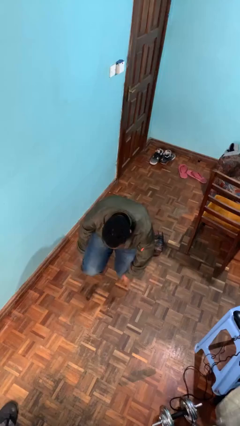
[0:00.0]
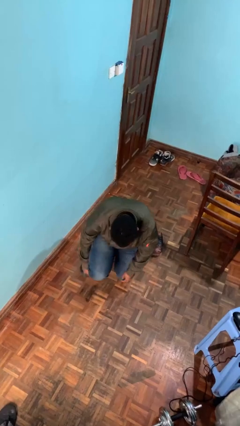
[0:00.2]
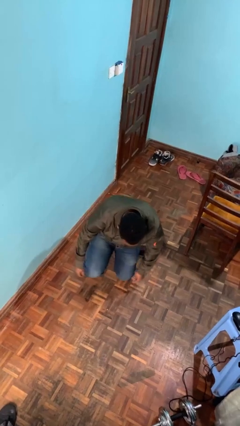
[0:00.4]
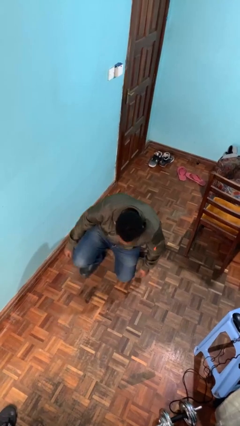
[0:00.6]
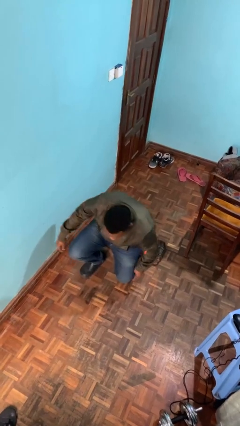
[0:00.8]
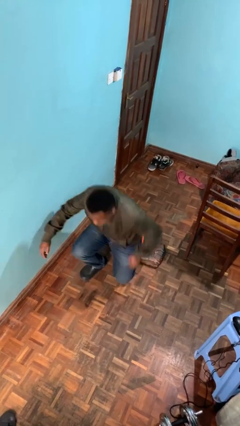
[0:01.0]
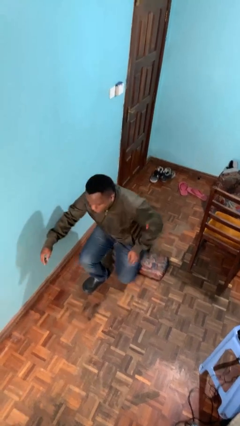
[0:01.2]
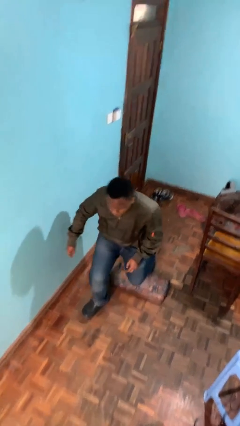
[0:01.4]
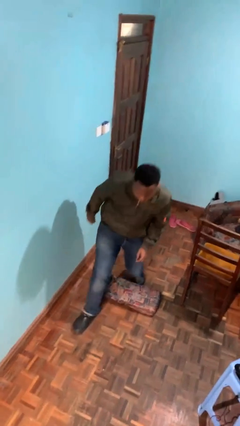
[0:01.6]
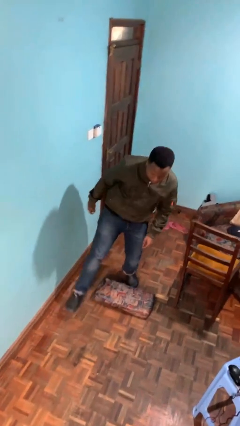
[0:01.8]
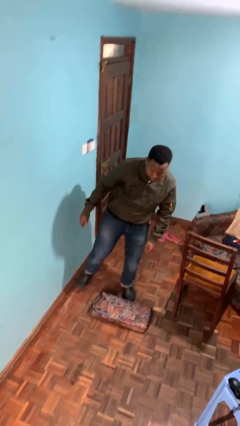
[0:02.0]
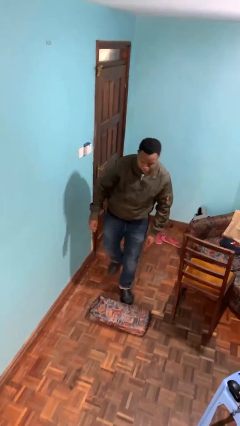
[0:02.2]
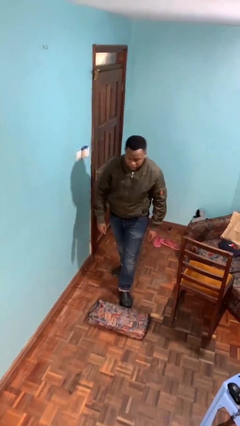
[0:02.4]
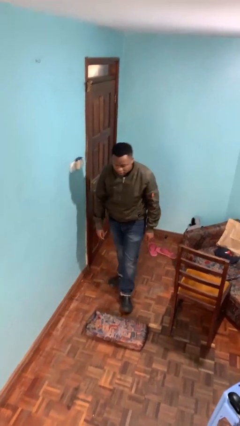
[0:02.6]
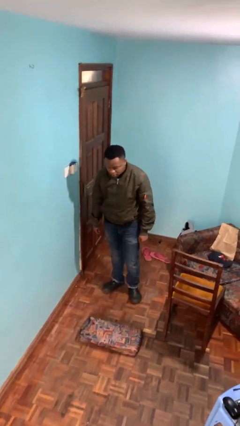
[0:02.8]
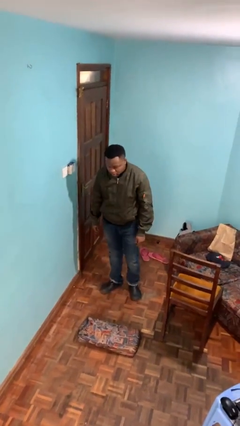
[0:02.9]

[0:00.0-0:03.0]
person stands up from floor

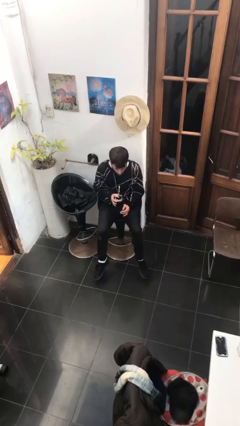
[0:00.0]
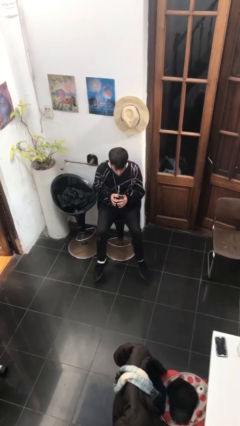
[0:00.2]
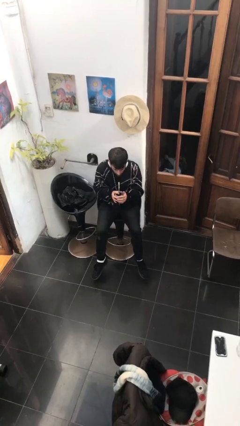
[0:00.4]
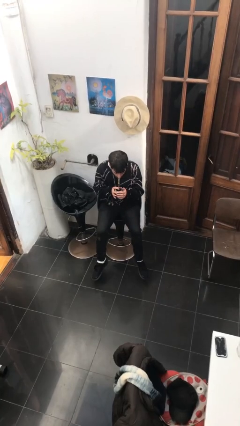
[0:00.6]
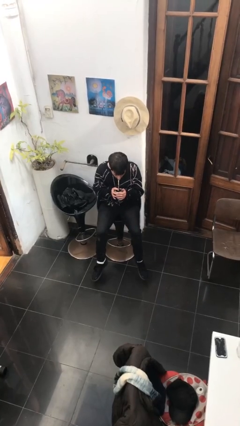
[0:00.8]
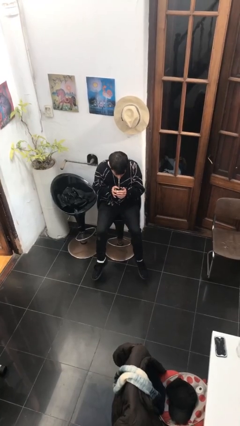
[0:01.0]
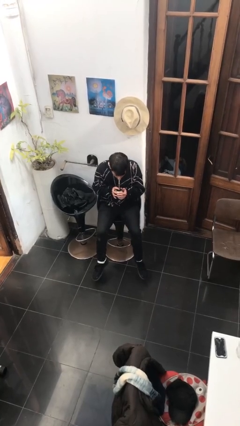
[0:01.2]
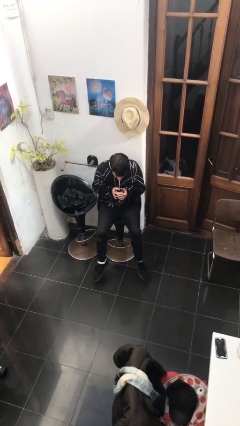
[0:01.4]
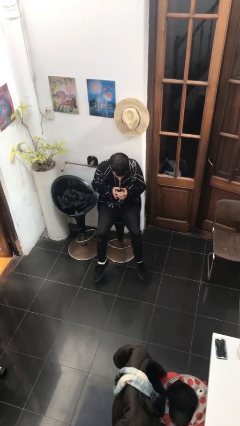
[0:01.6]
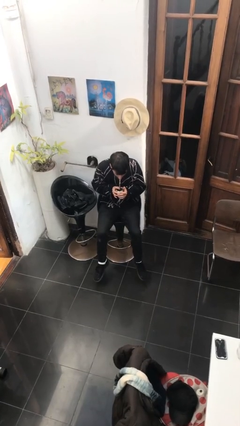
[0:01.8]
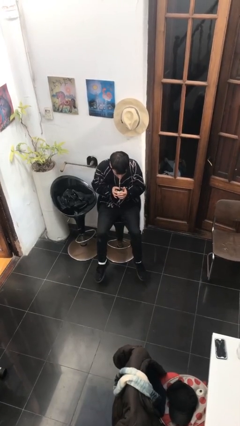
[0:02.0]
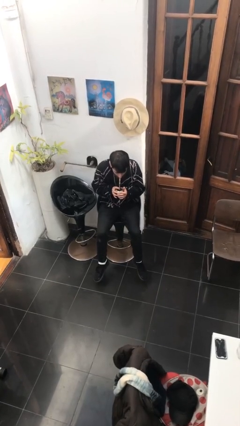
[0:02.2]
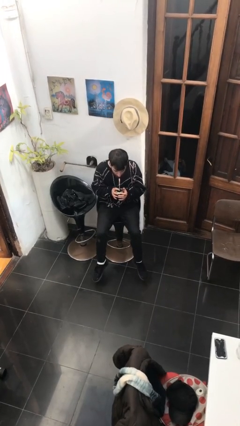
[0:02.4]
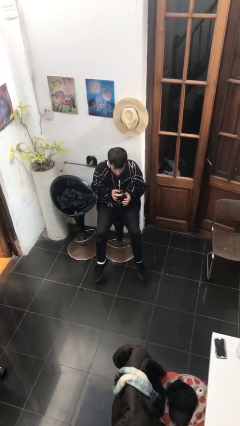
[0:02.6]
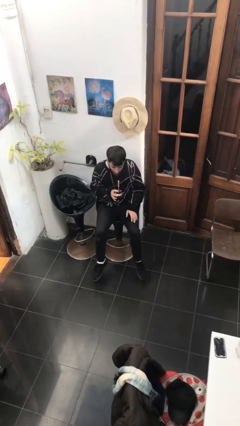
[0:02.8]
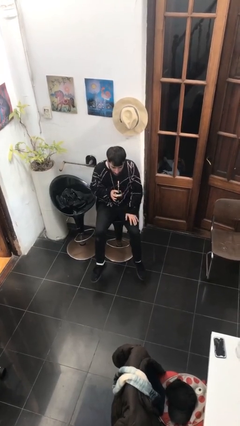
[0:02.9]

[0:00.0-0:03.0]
person drinks from straw

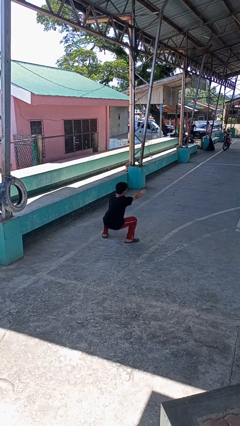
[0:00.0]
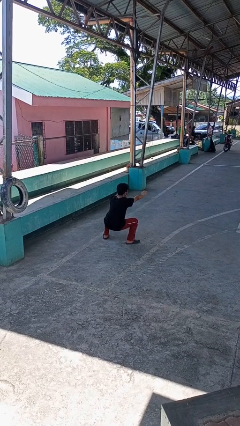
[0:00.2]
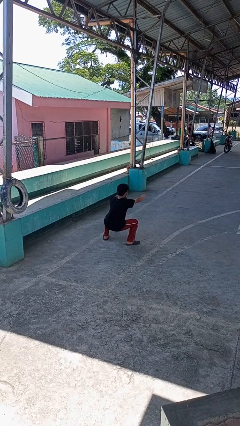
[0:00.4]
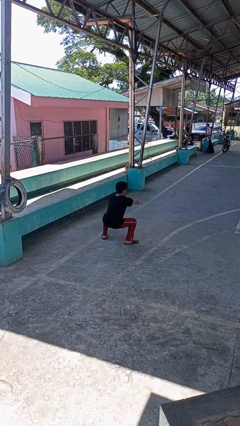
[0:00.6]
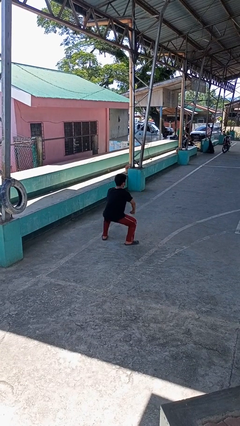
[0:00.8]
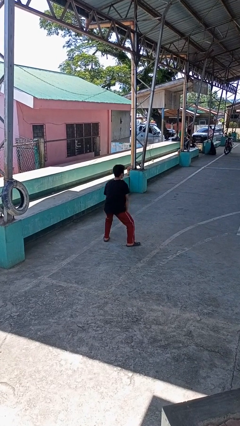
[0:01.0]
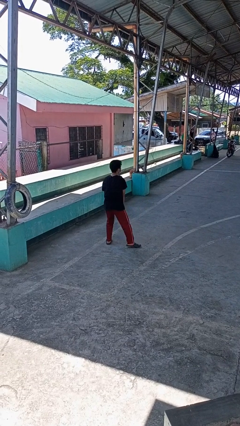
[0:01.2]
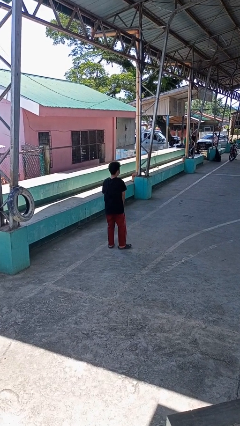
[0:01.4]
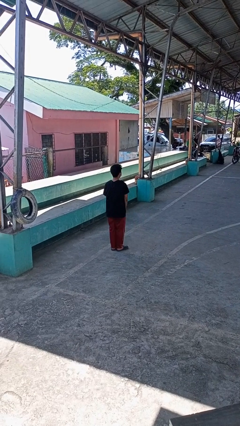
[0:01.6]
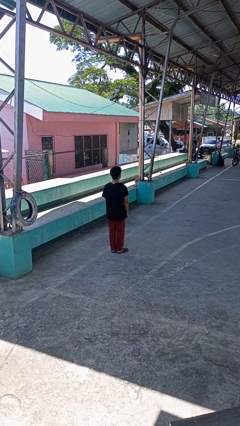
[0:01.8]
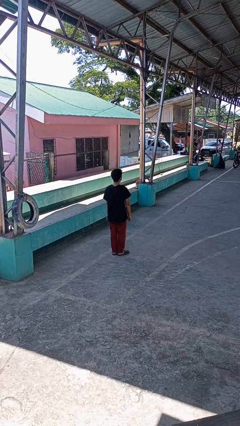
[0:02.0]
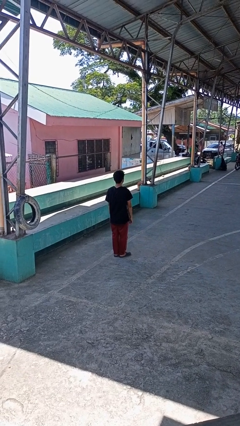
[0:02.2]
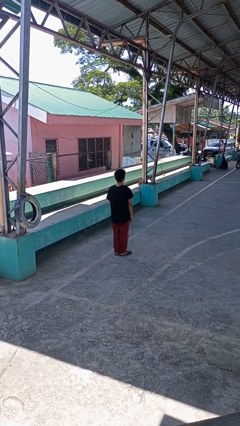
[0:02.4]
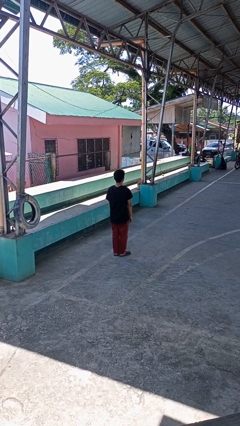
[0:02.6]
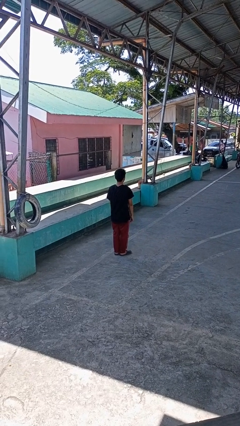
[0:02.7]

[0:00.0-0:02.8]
person stands up

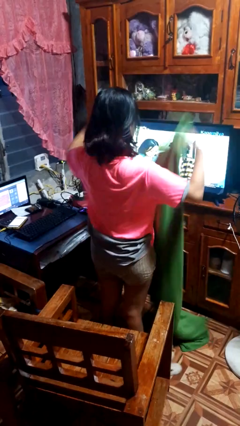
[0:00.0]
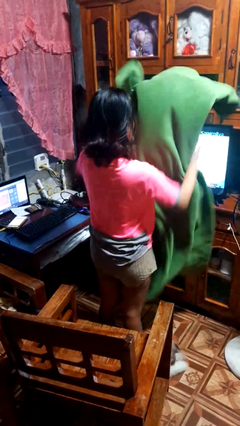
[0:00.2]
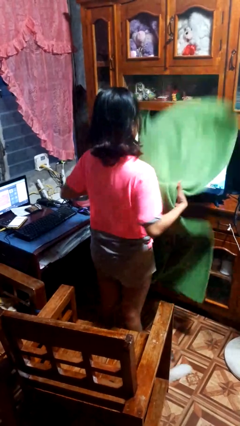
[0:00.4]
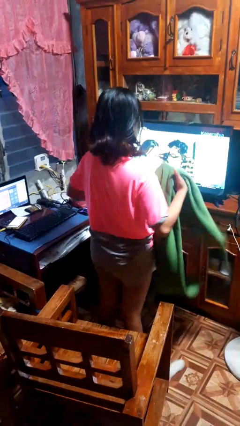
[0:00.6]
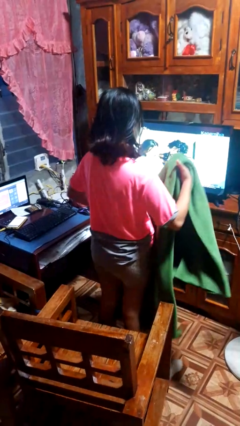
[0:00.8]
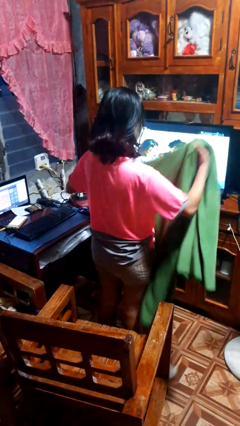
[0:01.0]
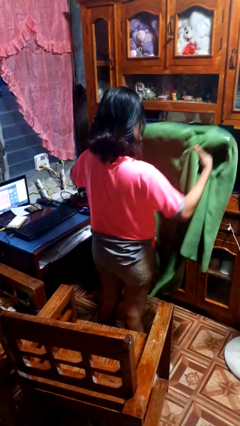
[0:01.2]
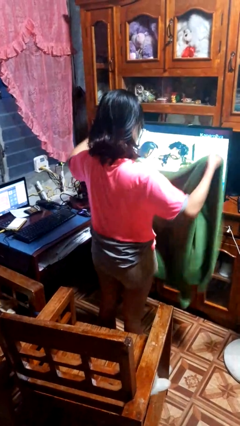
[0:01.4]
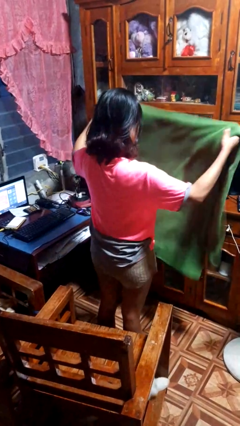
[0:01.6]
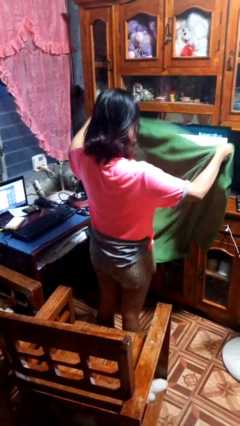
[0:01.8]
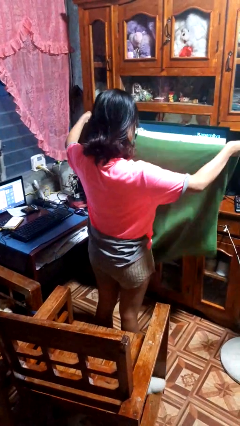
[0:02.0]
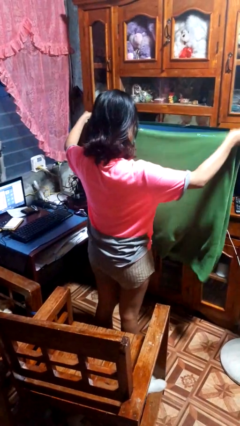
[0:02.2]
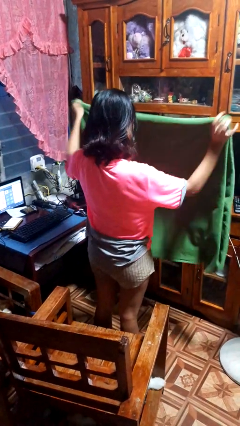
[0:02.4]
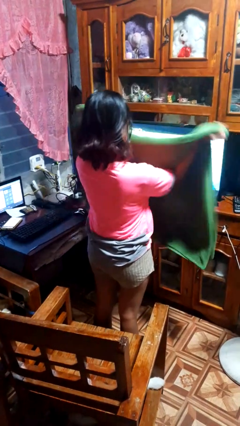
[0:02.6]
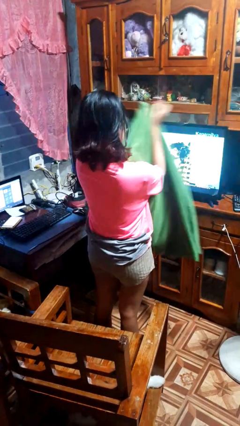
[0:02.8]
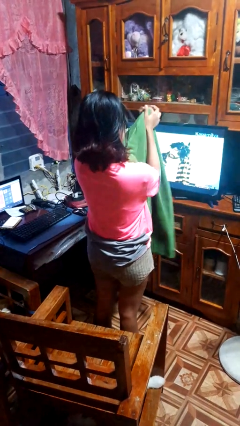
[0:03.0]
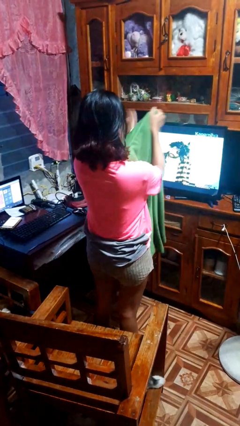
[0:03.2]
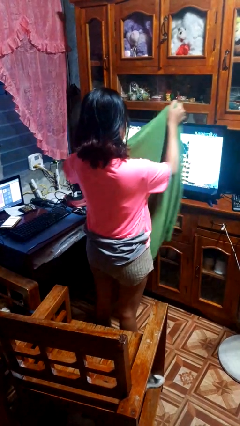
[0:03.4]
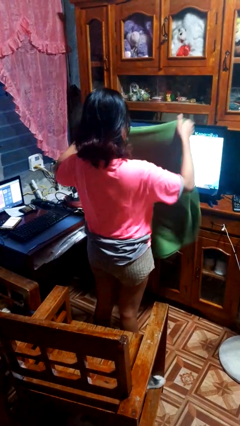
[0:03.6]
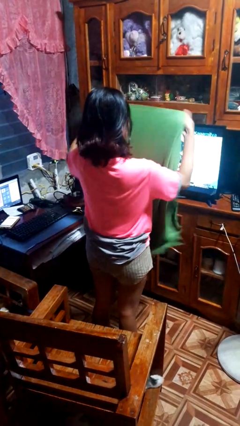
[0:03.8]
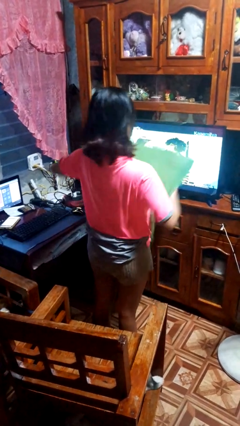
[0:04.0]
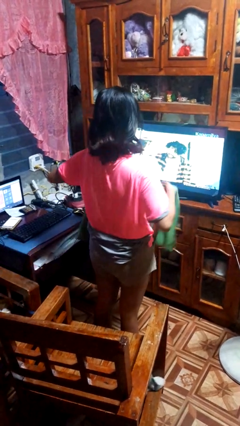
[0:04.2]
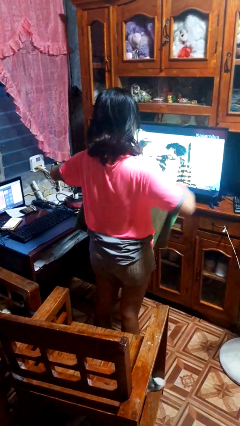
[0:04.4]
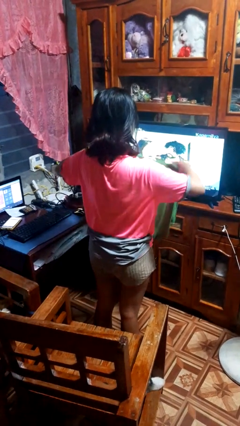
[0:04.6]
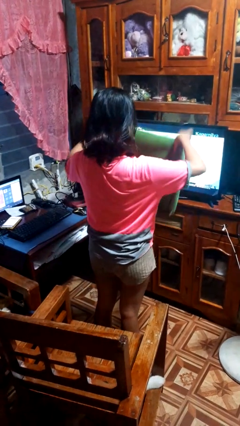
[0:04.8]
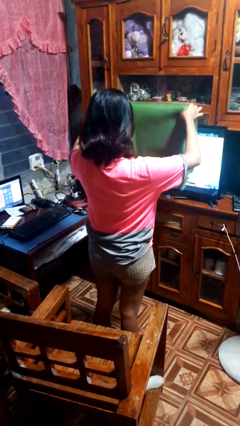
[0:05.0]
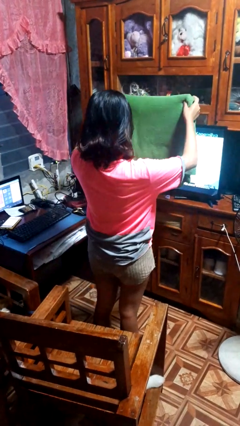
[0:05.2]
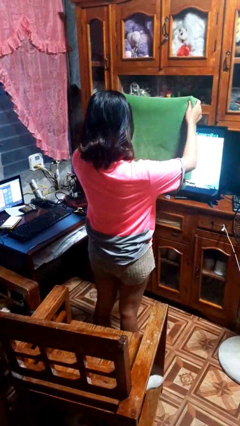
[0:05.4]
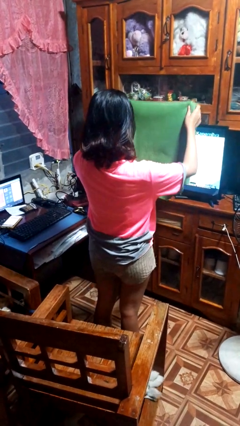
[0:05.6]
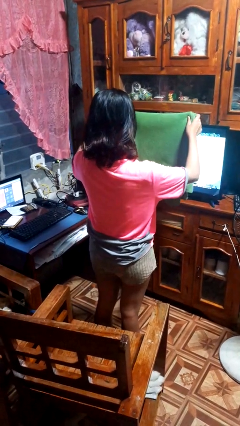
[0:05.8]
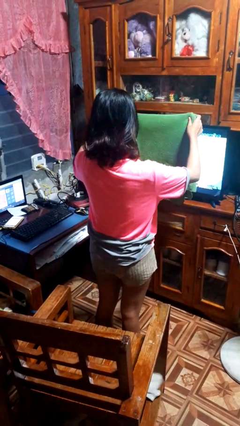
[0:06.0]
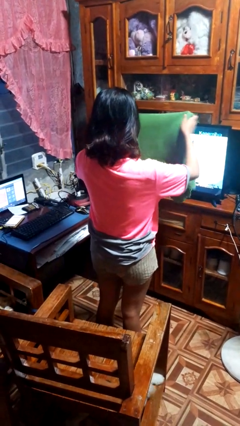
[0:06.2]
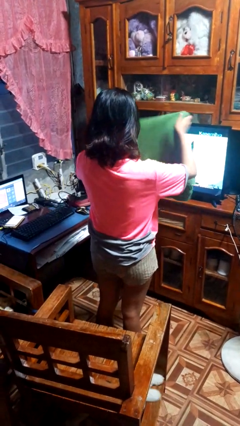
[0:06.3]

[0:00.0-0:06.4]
person folds blanket

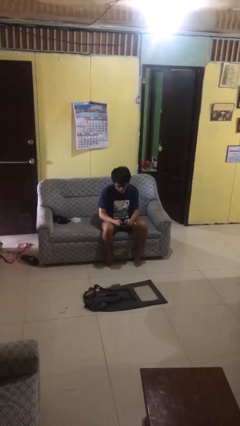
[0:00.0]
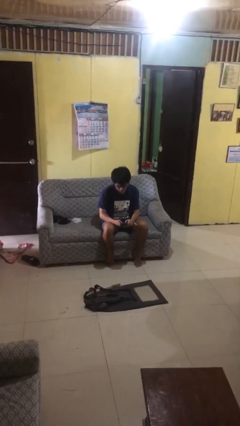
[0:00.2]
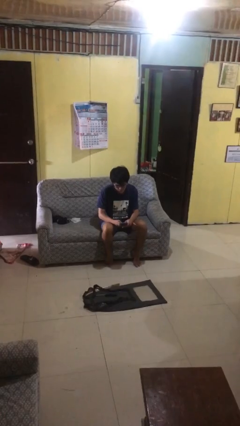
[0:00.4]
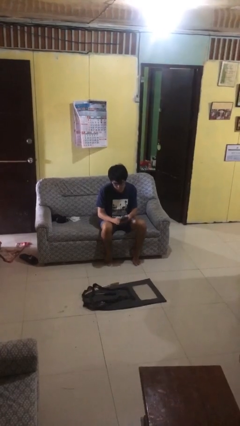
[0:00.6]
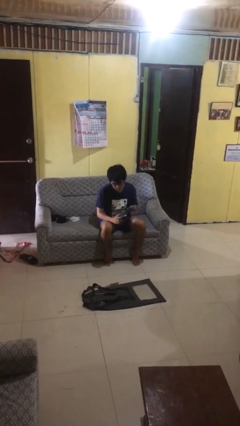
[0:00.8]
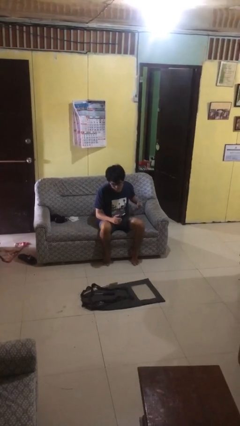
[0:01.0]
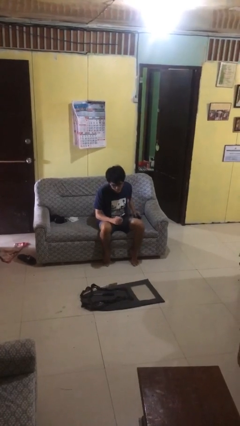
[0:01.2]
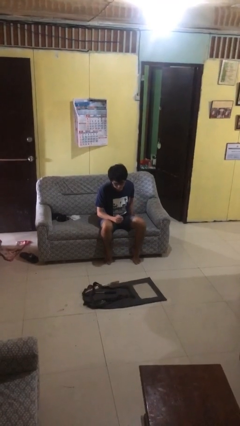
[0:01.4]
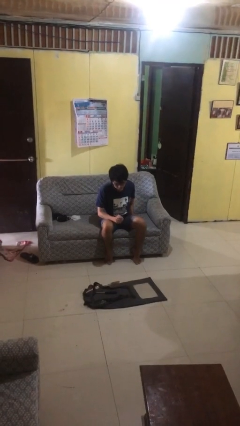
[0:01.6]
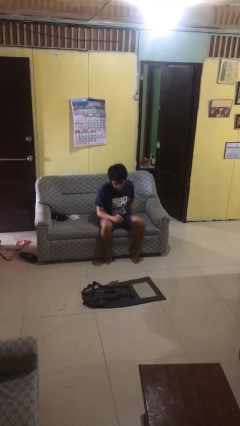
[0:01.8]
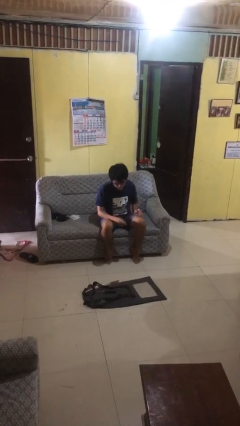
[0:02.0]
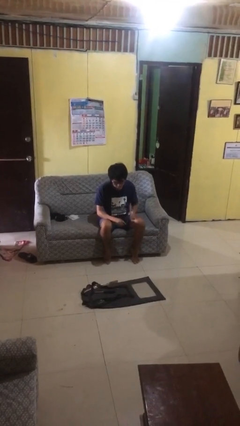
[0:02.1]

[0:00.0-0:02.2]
person puts phone into pocket

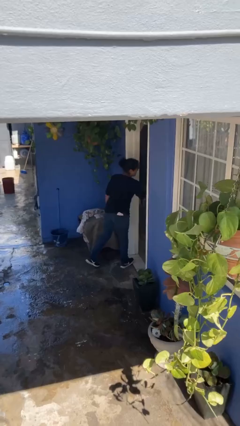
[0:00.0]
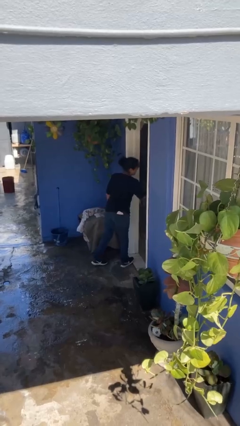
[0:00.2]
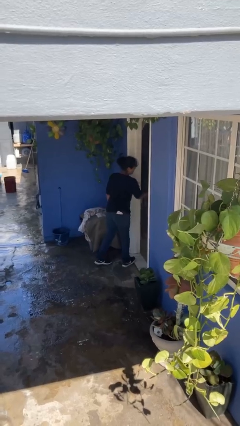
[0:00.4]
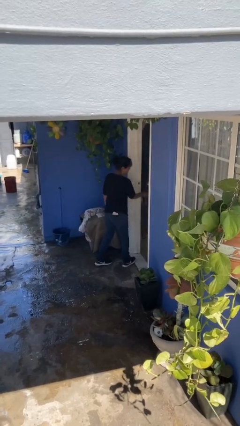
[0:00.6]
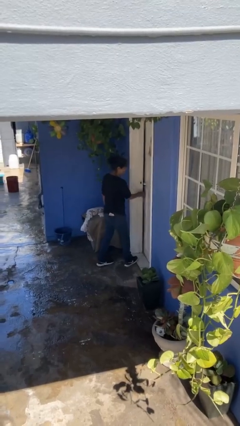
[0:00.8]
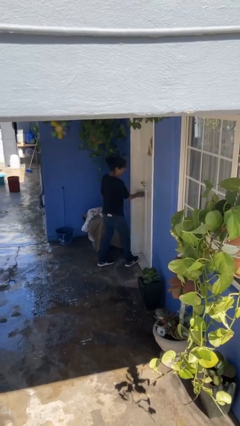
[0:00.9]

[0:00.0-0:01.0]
person closes facility door
